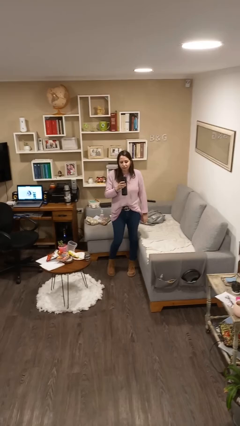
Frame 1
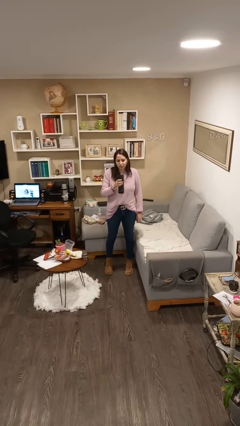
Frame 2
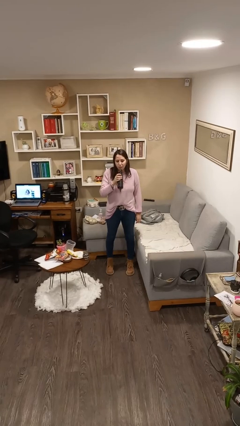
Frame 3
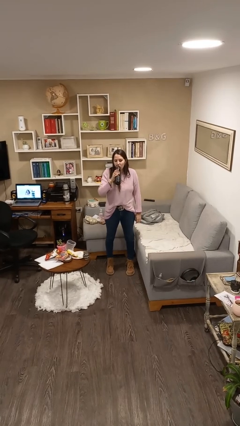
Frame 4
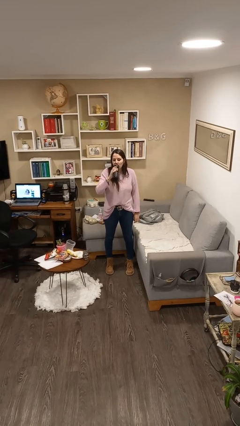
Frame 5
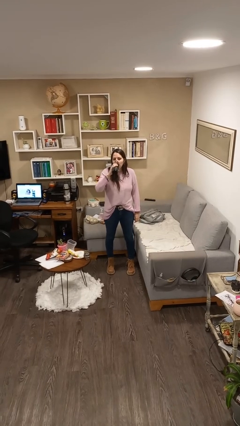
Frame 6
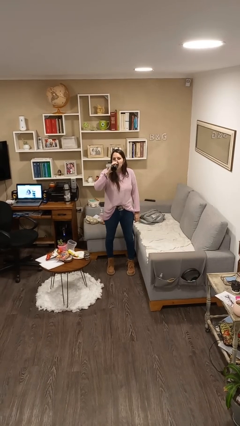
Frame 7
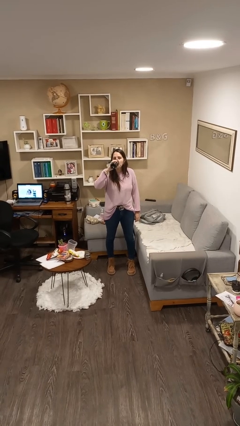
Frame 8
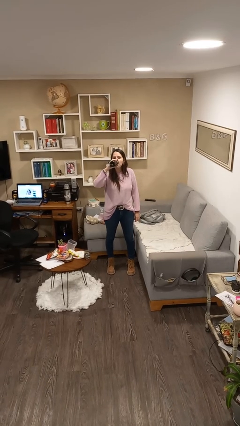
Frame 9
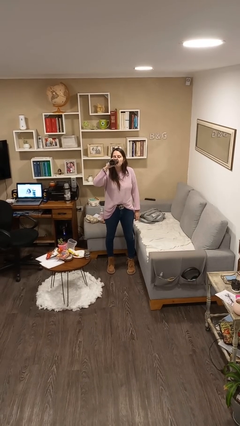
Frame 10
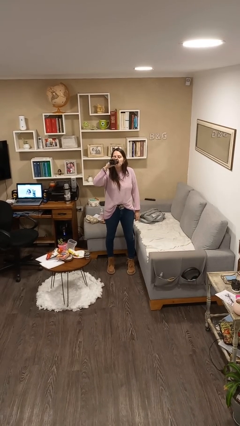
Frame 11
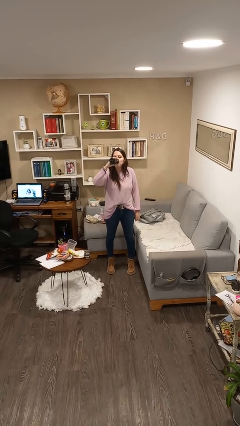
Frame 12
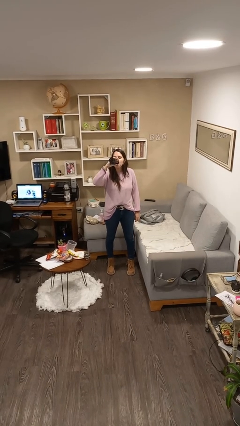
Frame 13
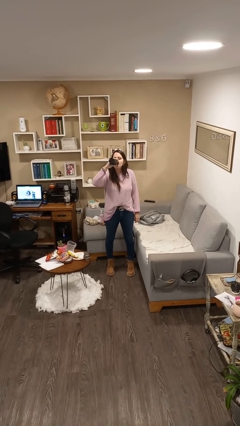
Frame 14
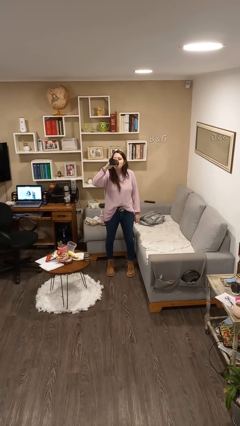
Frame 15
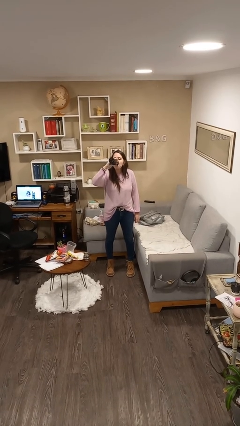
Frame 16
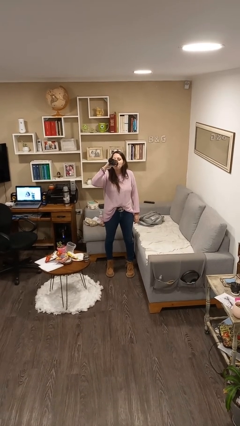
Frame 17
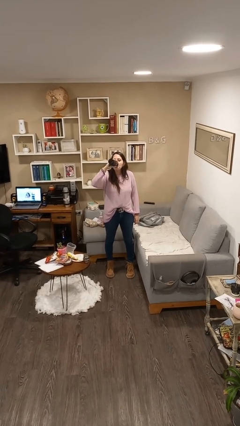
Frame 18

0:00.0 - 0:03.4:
person drinks from bottle

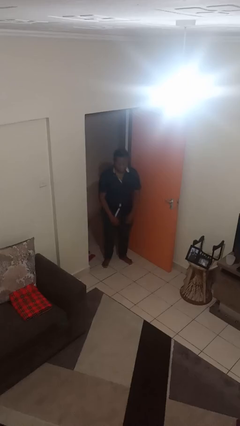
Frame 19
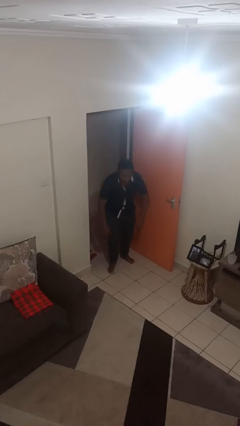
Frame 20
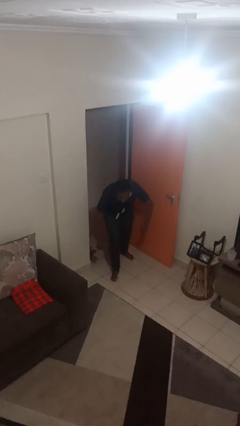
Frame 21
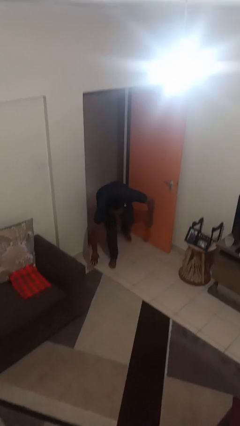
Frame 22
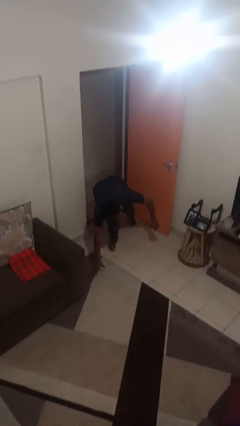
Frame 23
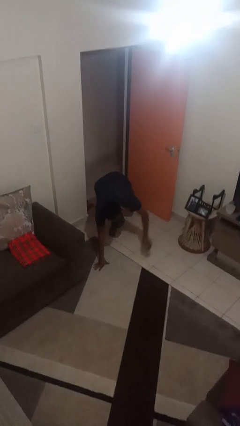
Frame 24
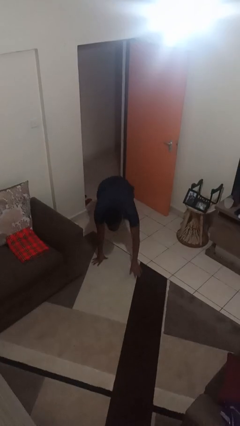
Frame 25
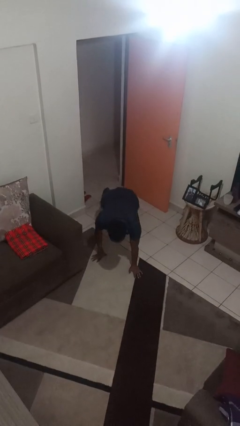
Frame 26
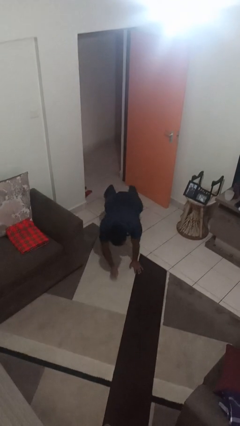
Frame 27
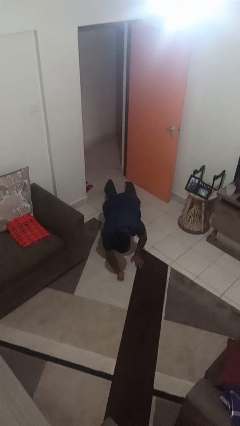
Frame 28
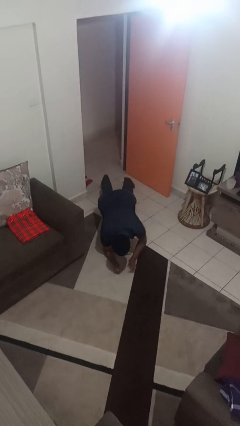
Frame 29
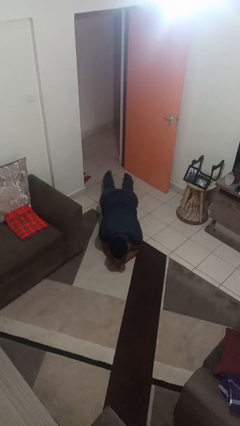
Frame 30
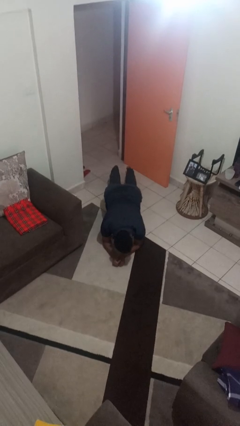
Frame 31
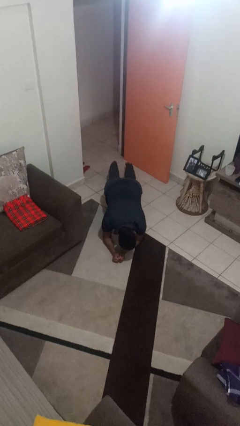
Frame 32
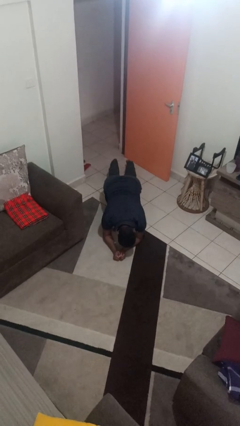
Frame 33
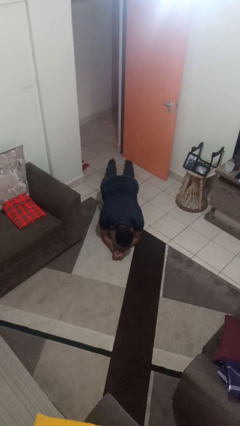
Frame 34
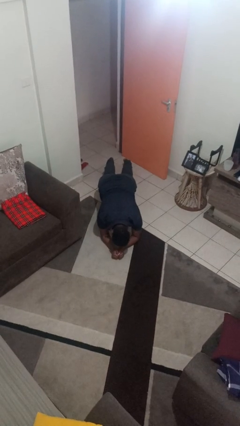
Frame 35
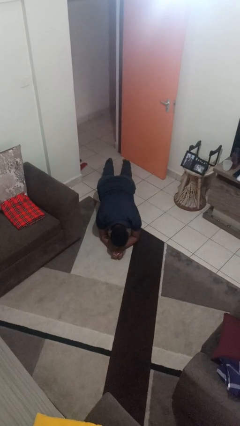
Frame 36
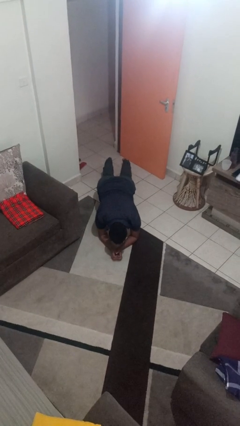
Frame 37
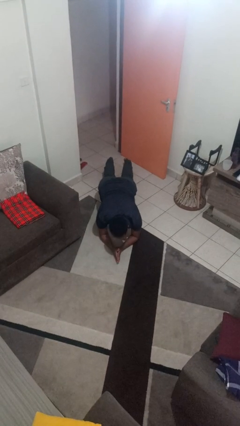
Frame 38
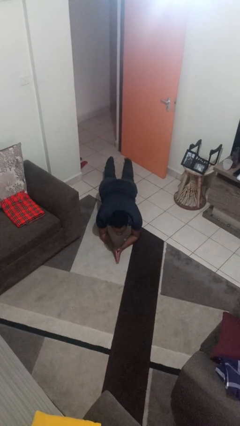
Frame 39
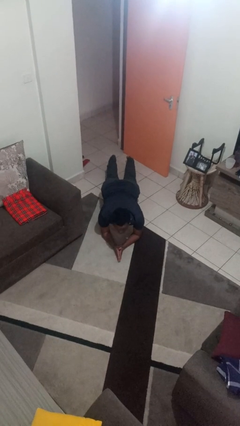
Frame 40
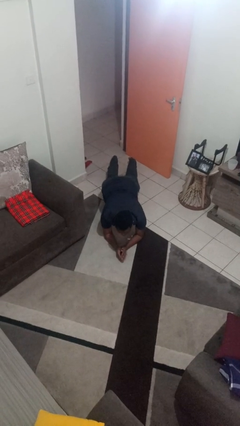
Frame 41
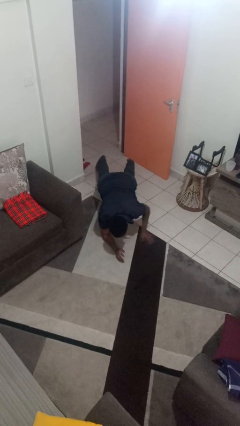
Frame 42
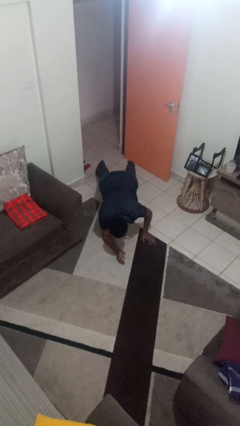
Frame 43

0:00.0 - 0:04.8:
person exercises with plank

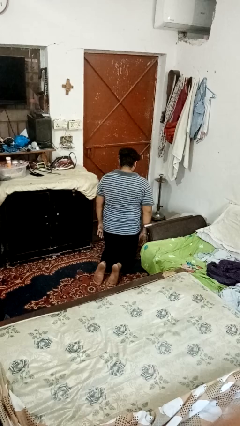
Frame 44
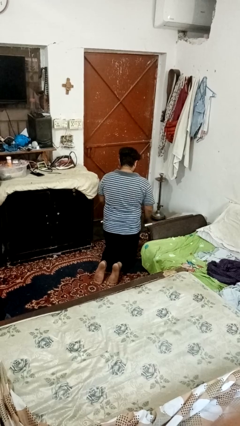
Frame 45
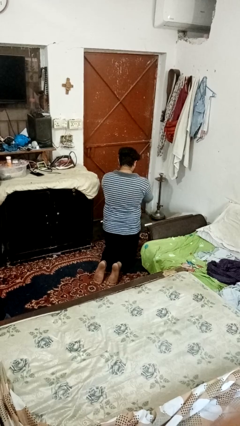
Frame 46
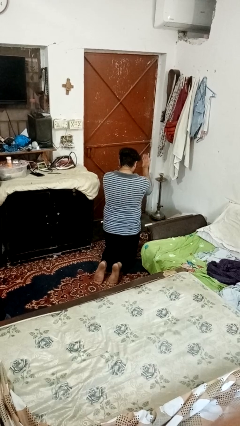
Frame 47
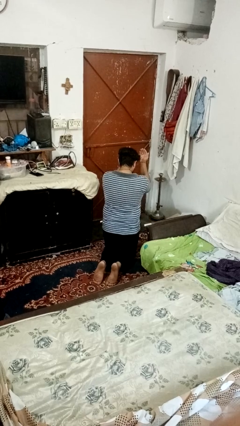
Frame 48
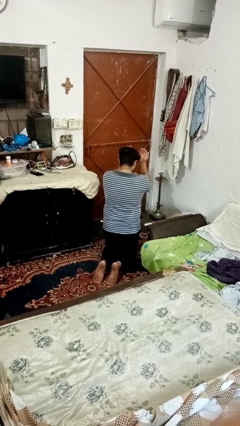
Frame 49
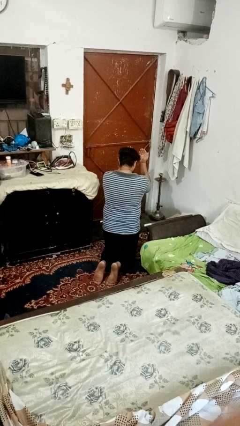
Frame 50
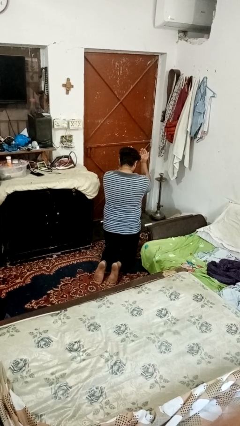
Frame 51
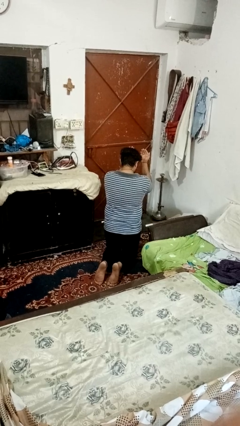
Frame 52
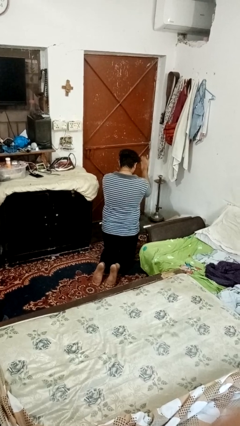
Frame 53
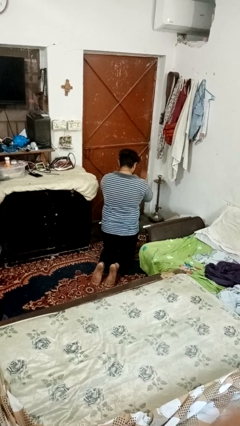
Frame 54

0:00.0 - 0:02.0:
person prays

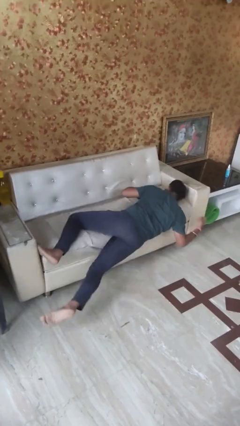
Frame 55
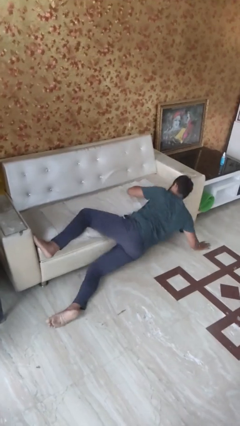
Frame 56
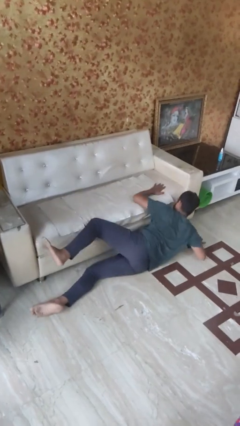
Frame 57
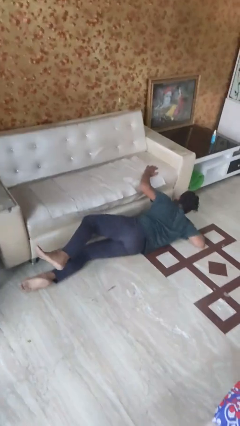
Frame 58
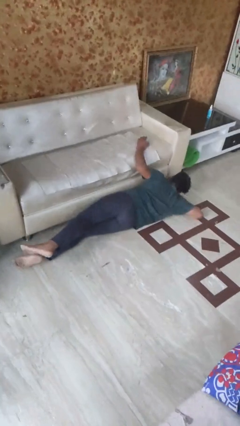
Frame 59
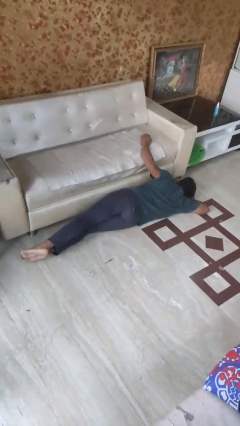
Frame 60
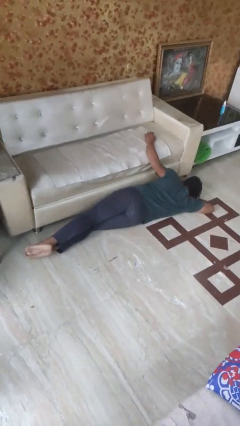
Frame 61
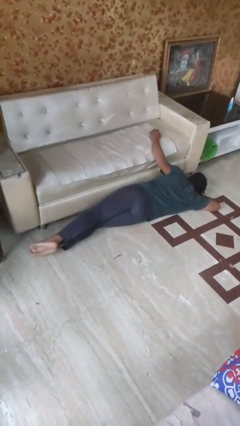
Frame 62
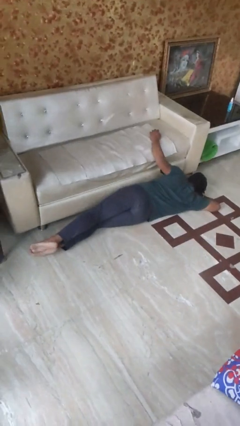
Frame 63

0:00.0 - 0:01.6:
person falls from bed

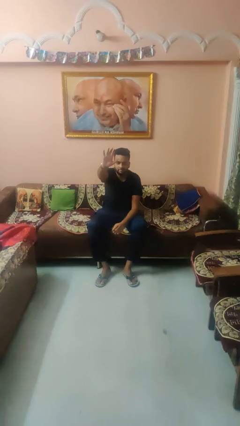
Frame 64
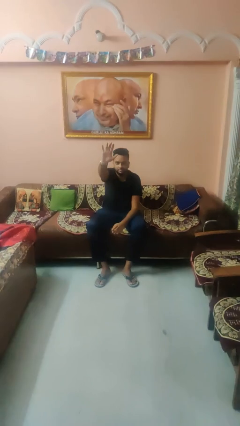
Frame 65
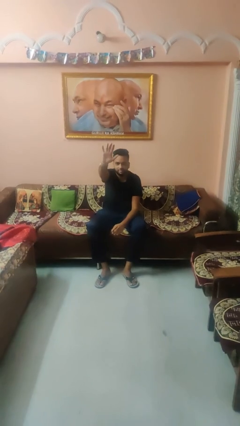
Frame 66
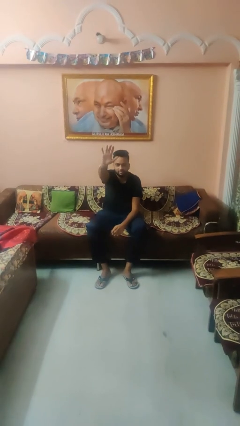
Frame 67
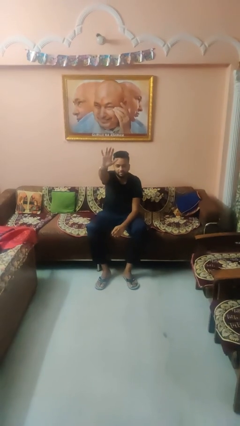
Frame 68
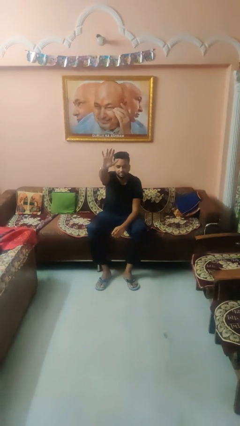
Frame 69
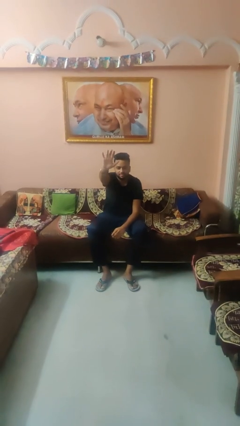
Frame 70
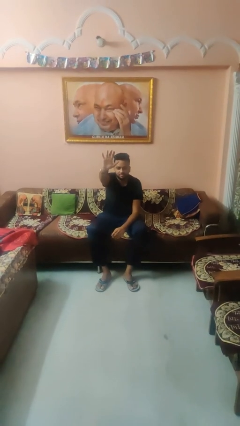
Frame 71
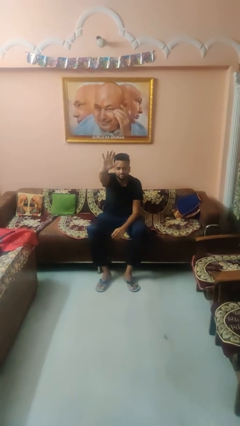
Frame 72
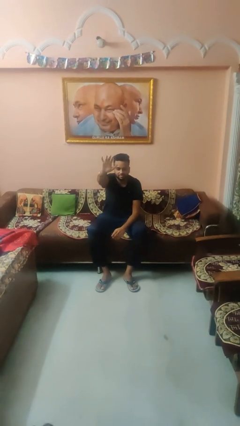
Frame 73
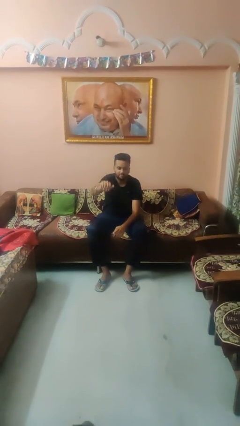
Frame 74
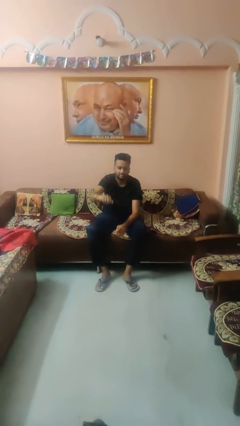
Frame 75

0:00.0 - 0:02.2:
person gestures number five

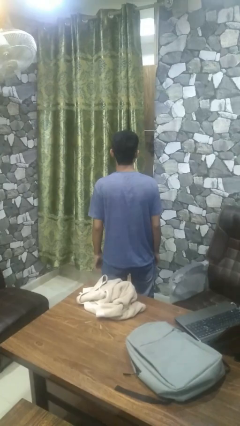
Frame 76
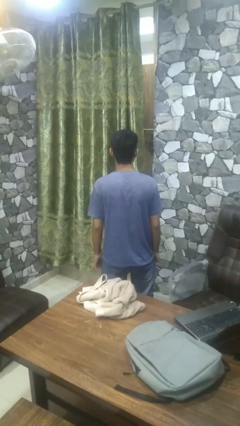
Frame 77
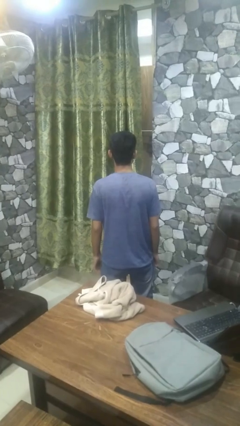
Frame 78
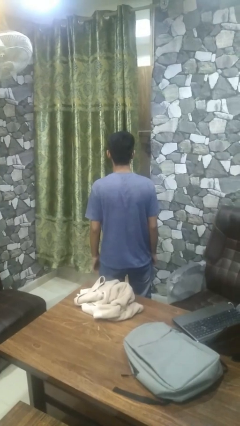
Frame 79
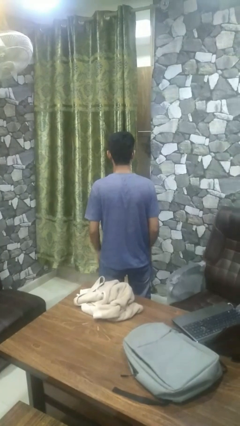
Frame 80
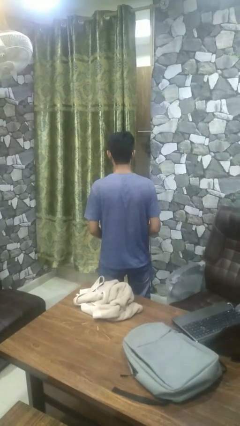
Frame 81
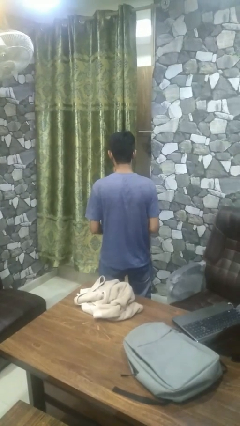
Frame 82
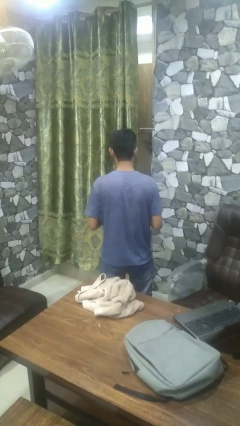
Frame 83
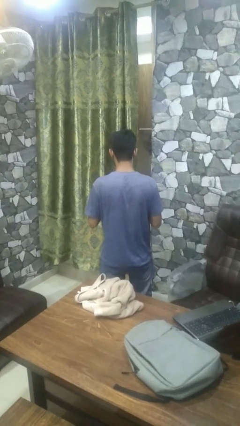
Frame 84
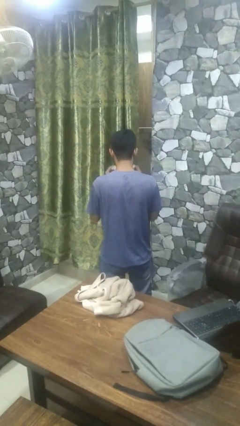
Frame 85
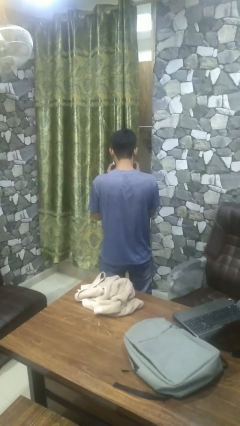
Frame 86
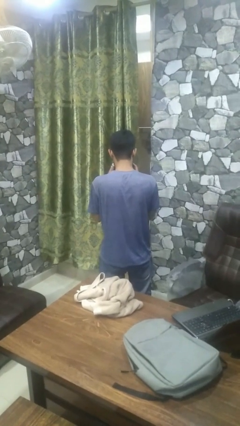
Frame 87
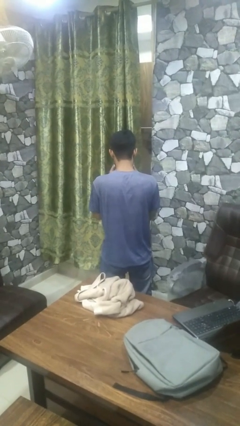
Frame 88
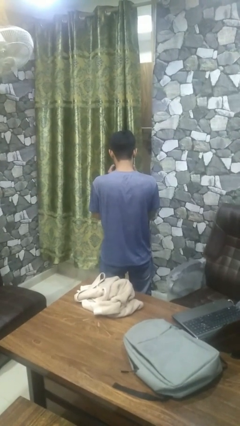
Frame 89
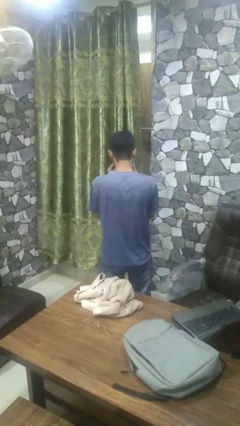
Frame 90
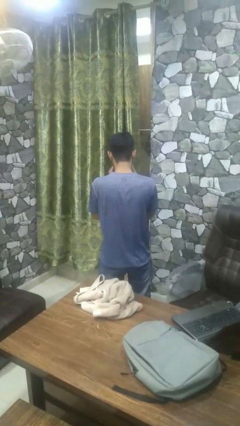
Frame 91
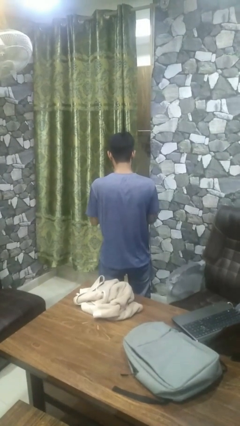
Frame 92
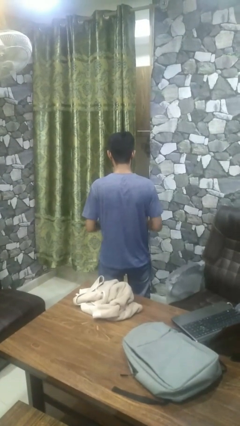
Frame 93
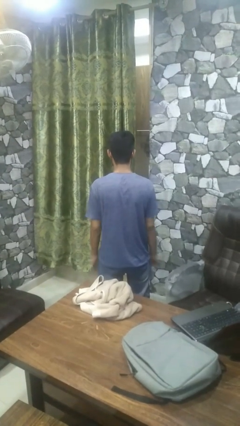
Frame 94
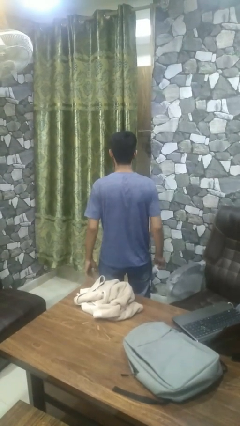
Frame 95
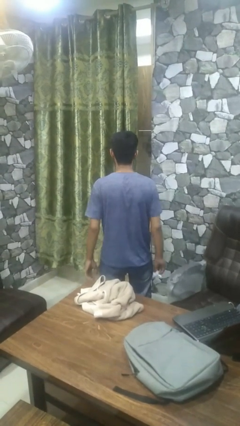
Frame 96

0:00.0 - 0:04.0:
person blows nose
